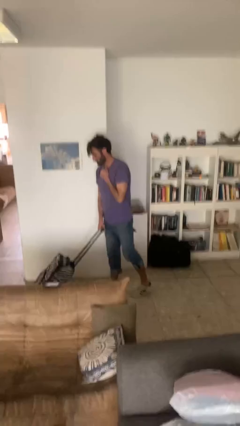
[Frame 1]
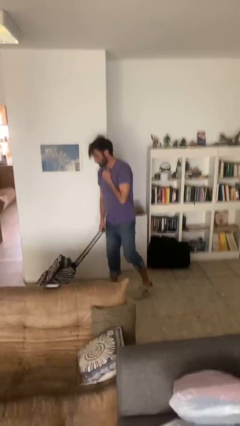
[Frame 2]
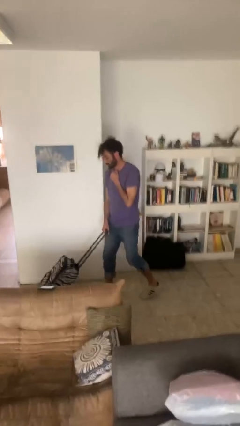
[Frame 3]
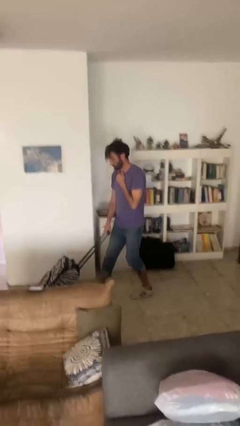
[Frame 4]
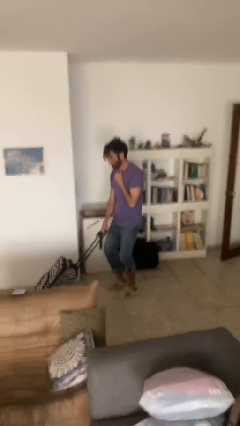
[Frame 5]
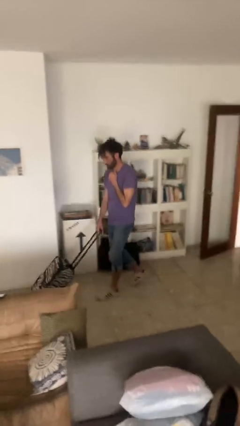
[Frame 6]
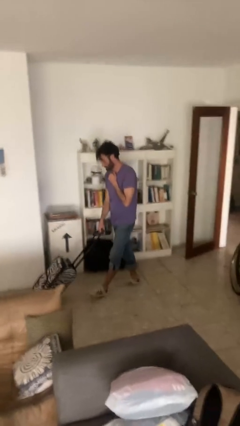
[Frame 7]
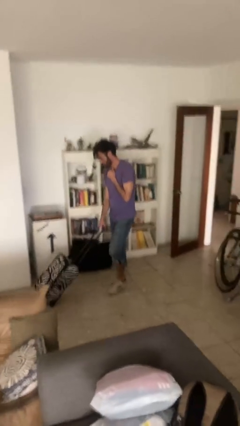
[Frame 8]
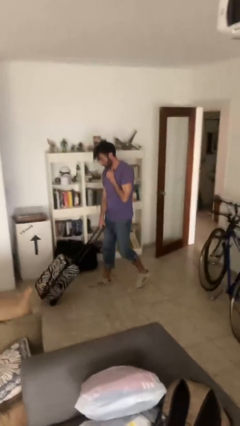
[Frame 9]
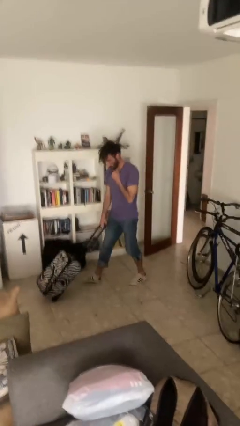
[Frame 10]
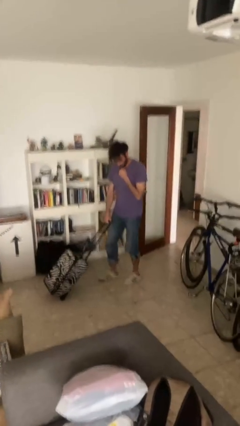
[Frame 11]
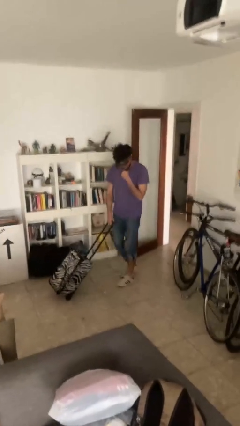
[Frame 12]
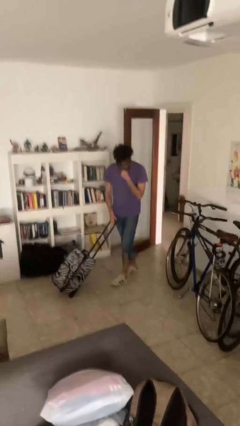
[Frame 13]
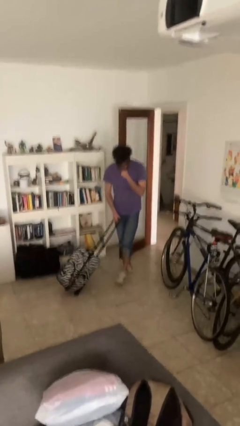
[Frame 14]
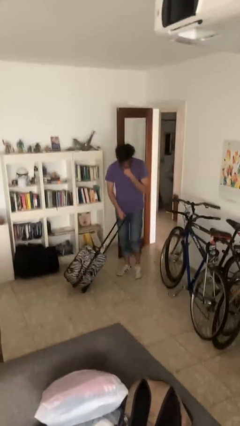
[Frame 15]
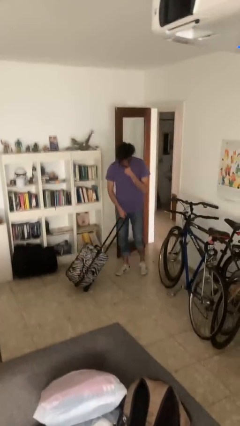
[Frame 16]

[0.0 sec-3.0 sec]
person pulls wheeled cart

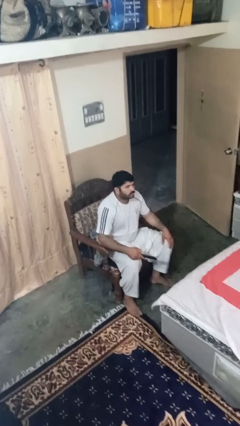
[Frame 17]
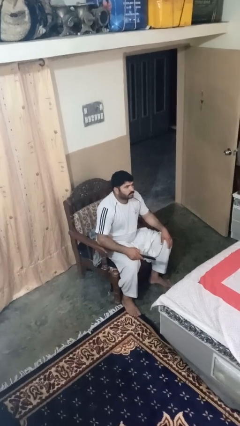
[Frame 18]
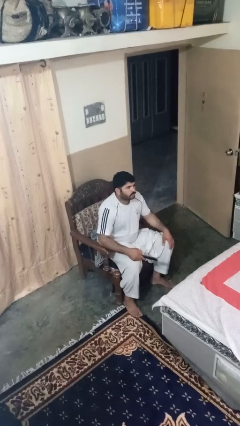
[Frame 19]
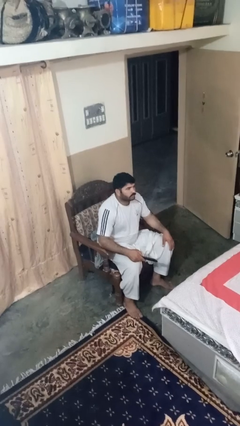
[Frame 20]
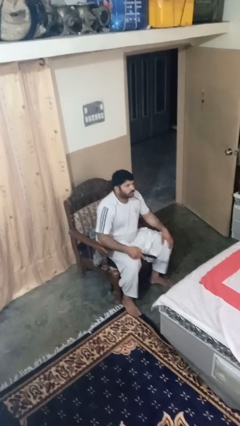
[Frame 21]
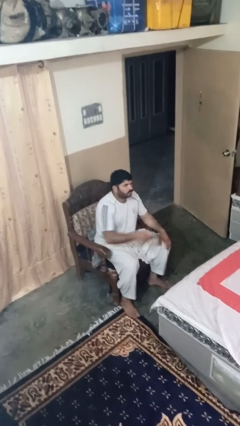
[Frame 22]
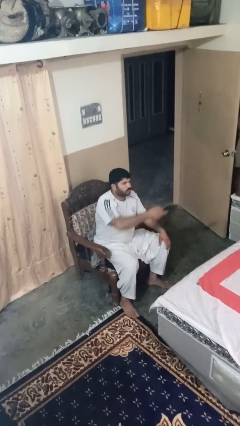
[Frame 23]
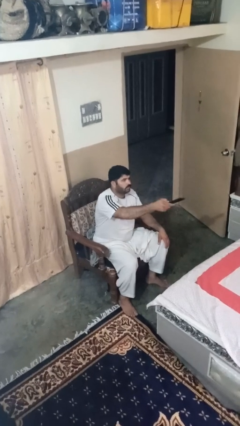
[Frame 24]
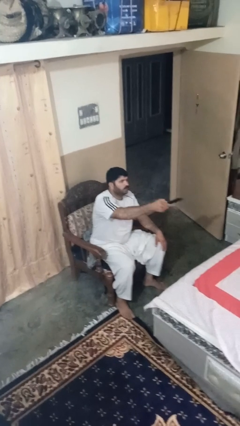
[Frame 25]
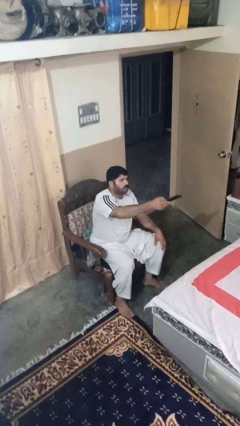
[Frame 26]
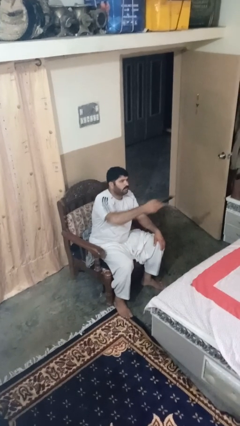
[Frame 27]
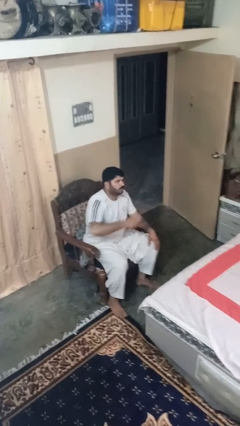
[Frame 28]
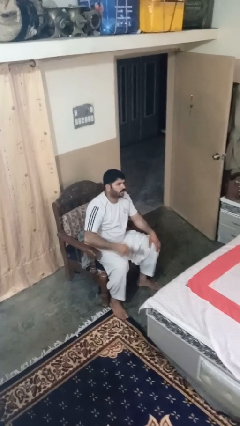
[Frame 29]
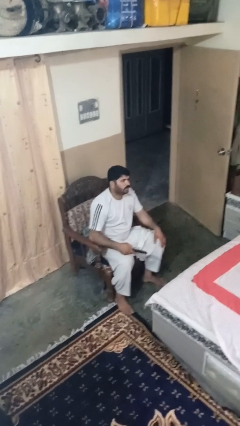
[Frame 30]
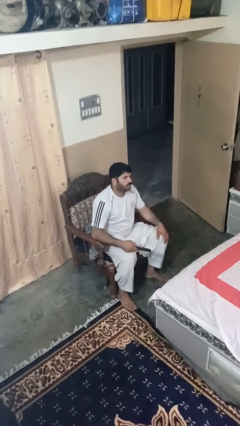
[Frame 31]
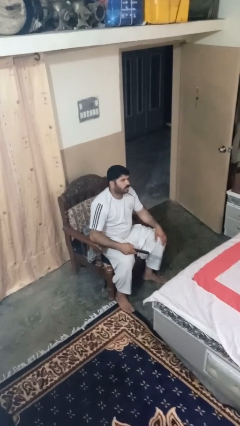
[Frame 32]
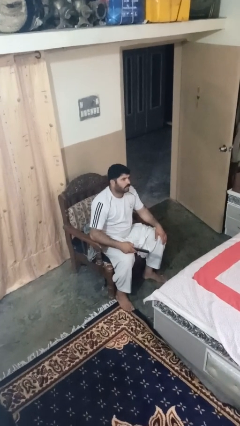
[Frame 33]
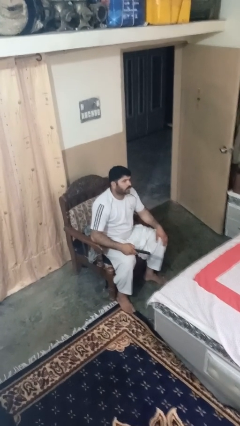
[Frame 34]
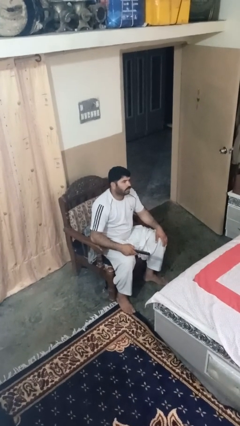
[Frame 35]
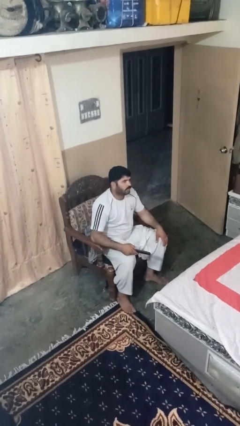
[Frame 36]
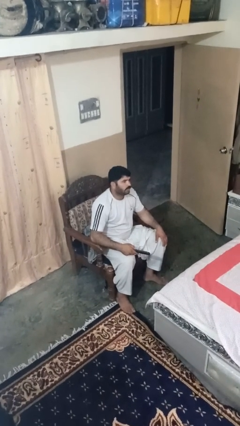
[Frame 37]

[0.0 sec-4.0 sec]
person uses television remote

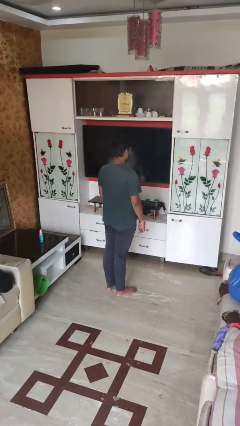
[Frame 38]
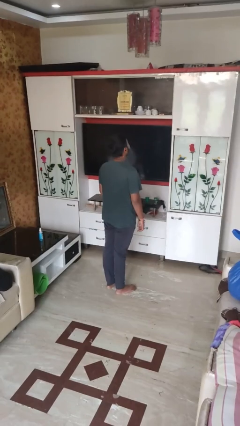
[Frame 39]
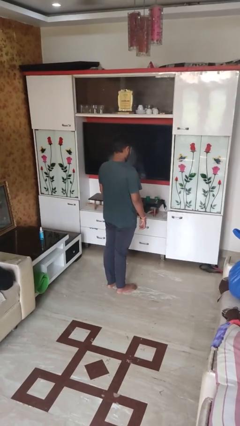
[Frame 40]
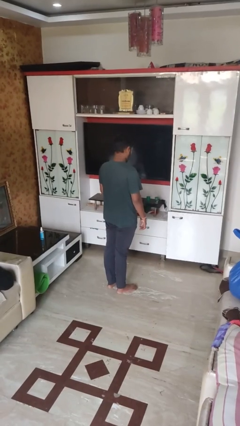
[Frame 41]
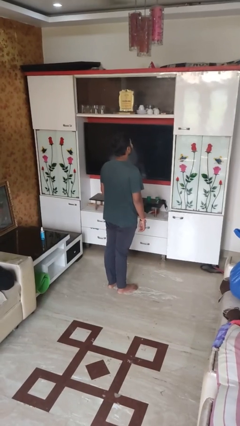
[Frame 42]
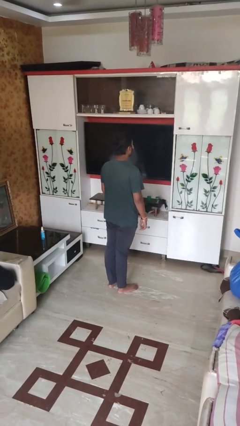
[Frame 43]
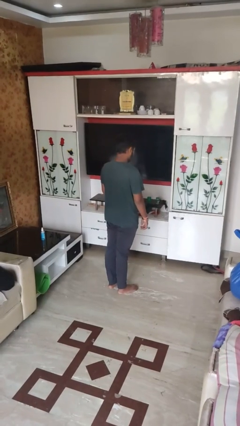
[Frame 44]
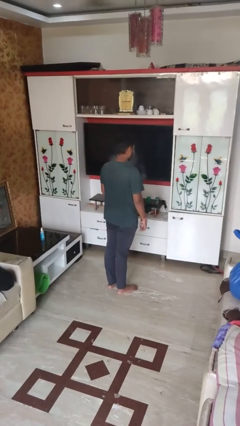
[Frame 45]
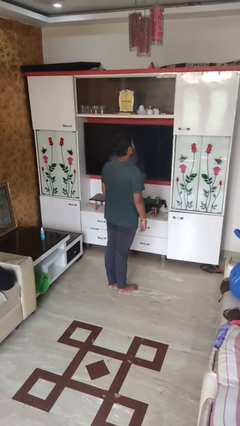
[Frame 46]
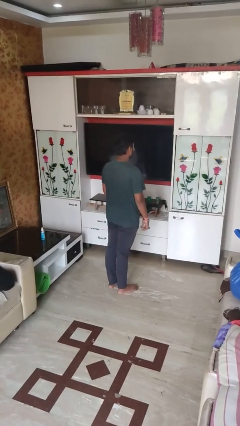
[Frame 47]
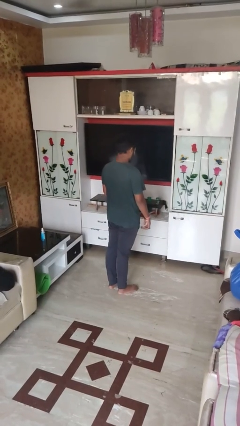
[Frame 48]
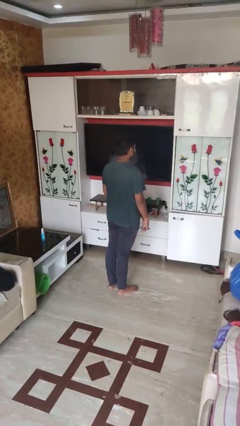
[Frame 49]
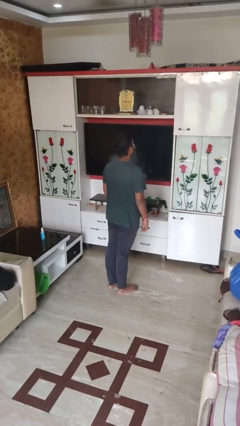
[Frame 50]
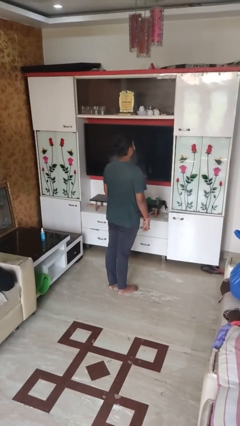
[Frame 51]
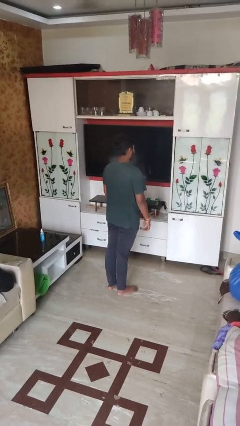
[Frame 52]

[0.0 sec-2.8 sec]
person nods head

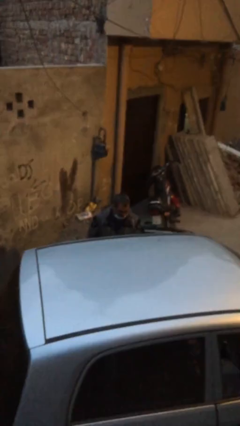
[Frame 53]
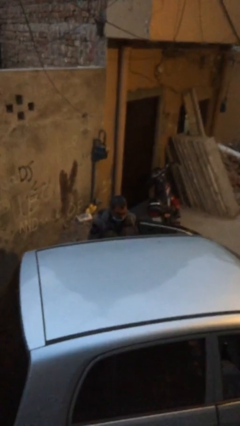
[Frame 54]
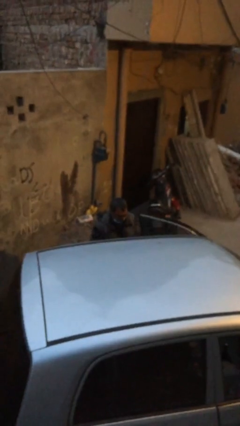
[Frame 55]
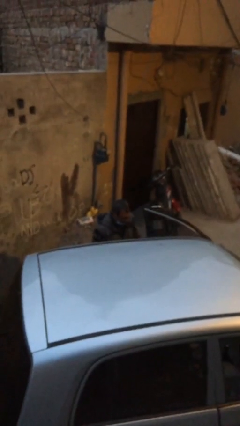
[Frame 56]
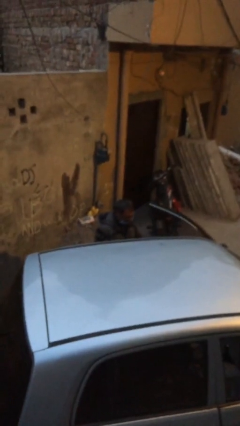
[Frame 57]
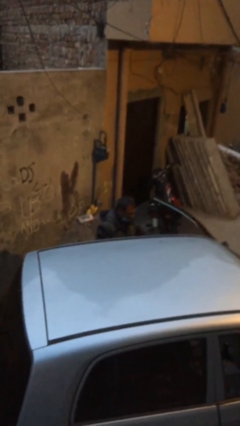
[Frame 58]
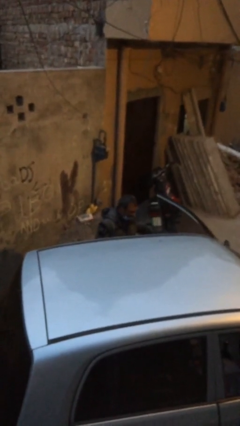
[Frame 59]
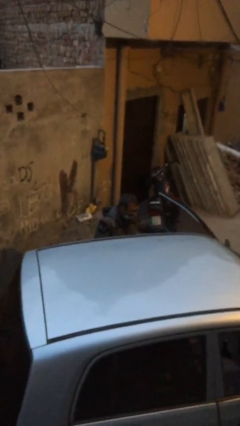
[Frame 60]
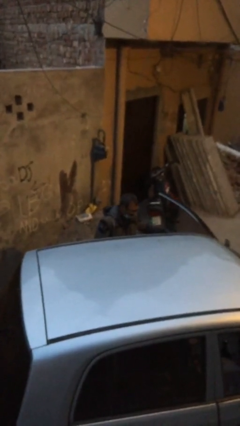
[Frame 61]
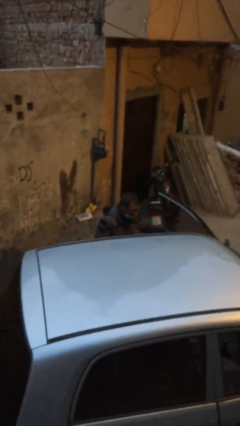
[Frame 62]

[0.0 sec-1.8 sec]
person opens car door

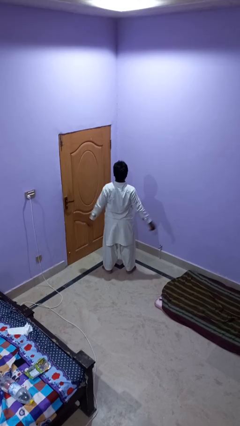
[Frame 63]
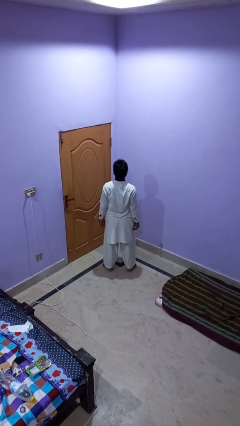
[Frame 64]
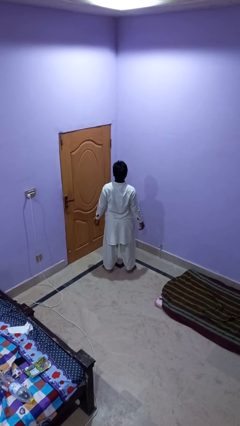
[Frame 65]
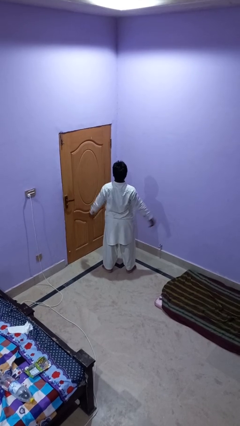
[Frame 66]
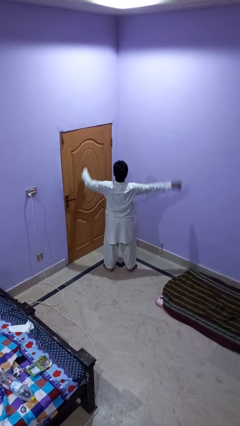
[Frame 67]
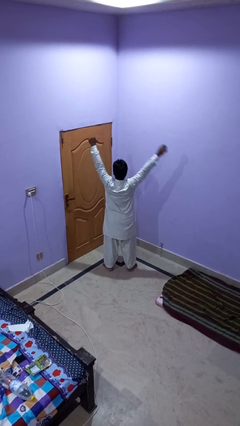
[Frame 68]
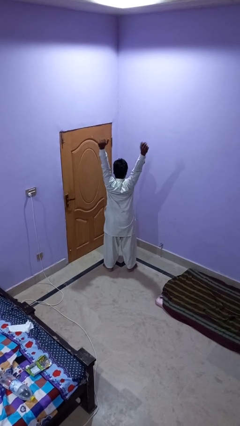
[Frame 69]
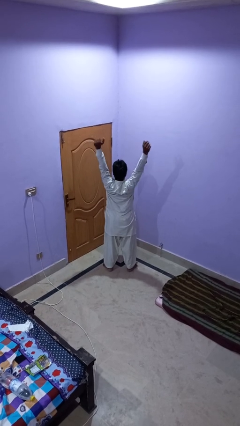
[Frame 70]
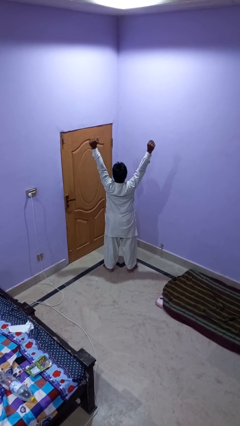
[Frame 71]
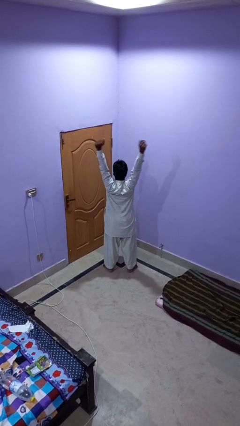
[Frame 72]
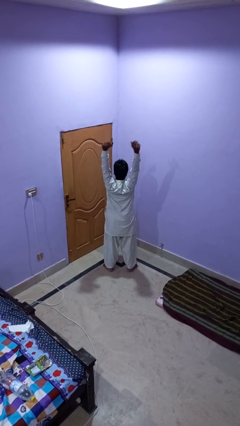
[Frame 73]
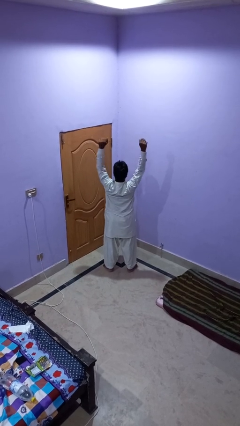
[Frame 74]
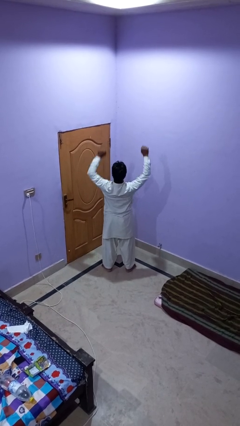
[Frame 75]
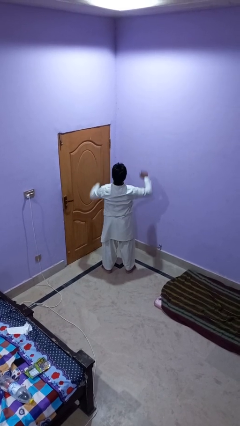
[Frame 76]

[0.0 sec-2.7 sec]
person stretches arms over head

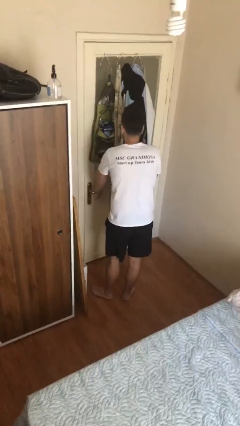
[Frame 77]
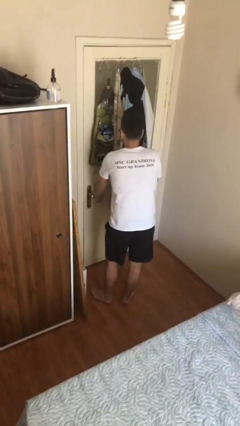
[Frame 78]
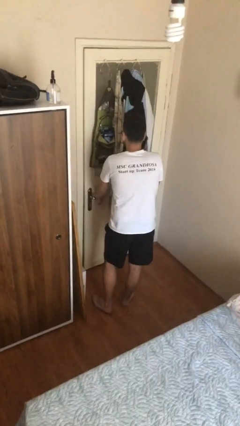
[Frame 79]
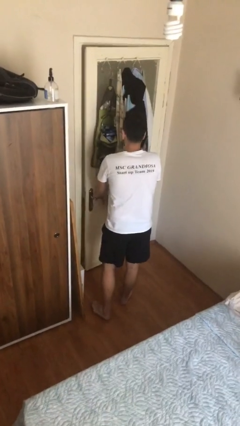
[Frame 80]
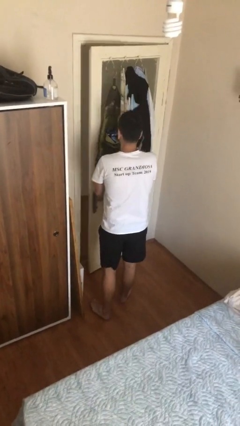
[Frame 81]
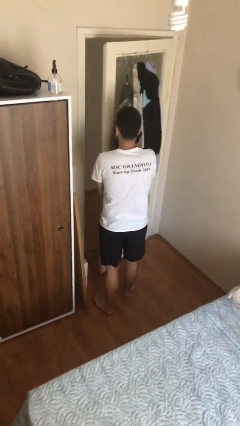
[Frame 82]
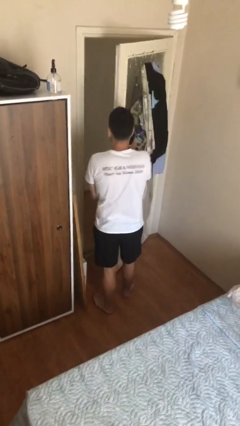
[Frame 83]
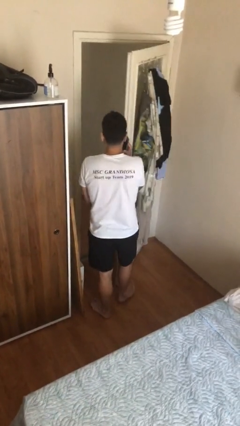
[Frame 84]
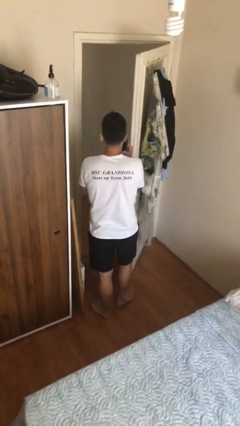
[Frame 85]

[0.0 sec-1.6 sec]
person opens facility door

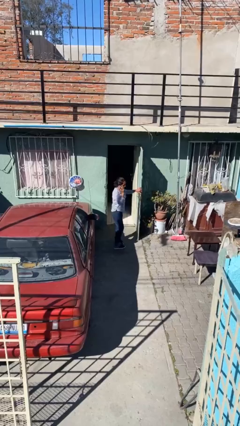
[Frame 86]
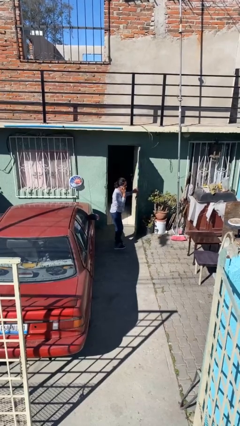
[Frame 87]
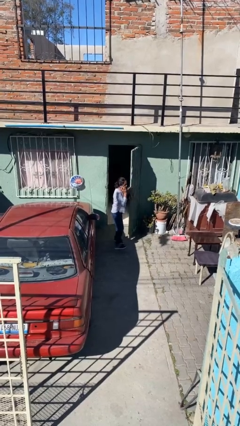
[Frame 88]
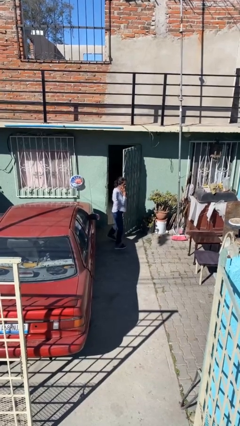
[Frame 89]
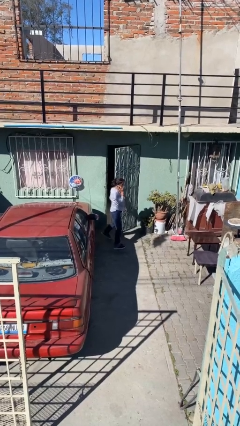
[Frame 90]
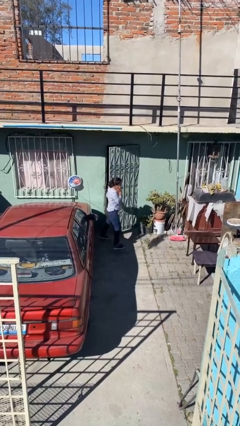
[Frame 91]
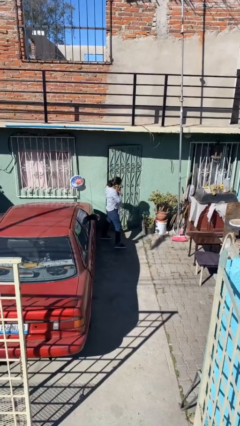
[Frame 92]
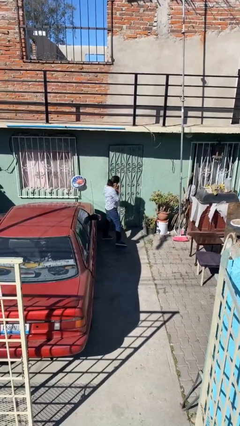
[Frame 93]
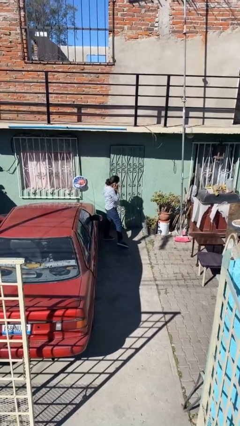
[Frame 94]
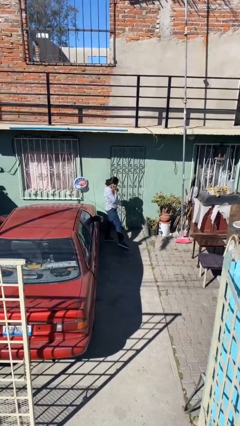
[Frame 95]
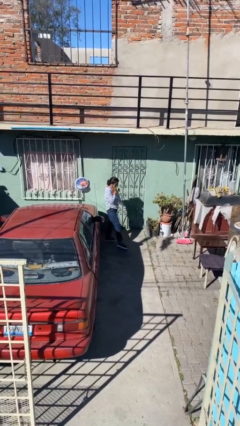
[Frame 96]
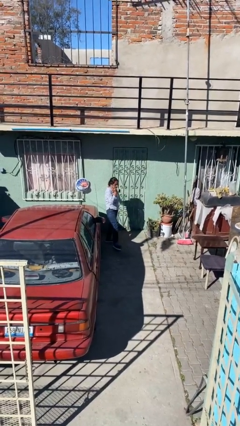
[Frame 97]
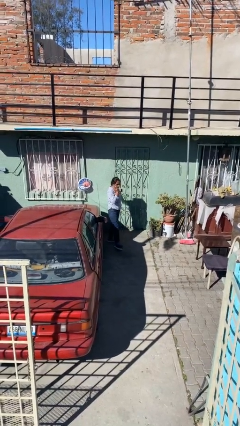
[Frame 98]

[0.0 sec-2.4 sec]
person closes facility door
